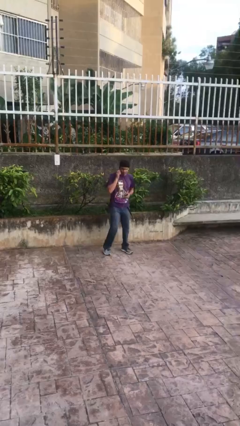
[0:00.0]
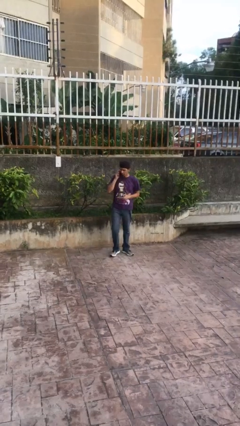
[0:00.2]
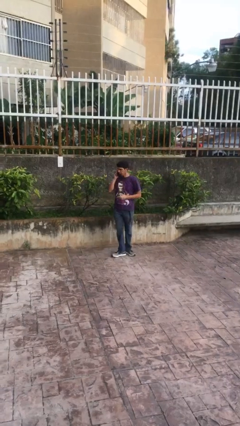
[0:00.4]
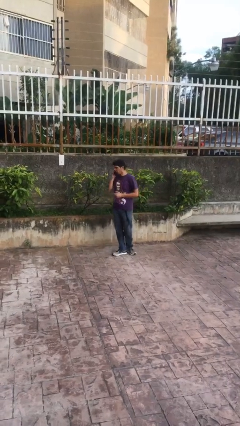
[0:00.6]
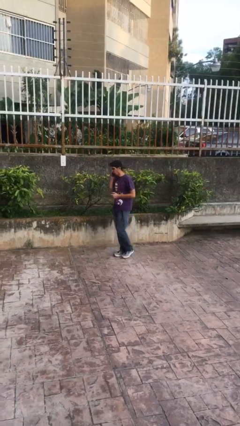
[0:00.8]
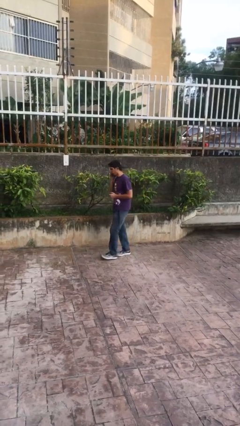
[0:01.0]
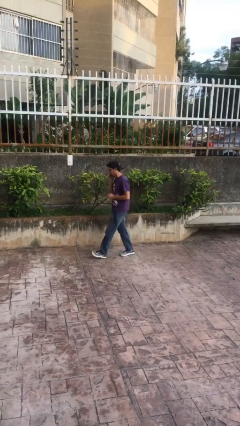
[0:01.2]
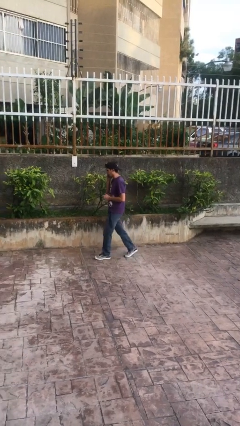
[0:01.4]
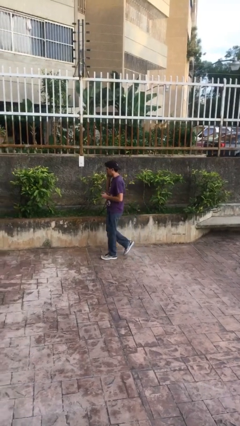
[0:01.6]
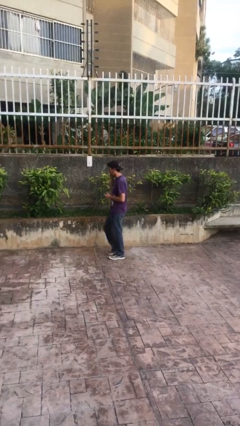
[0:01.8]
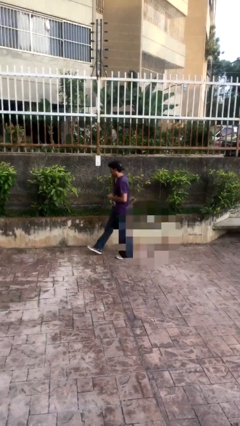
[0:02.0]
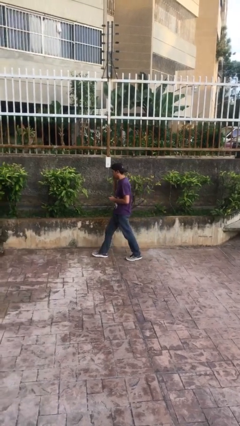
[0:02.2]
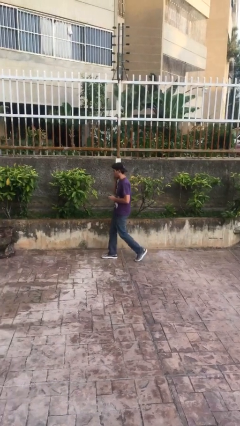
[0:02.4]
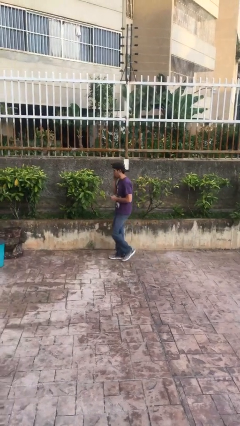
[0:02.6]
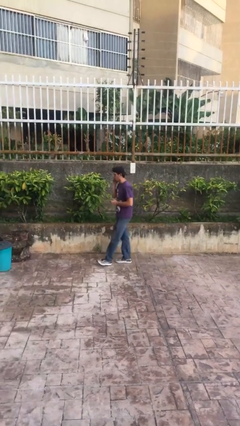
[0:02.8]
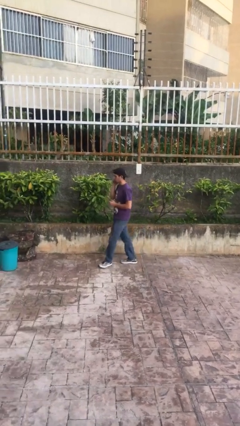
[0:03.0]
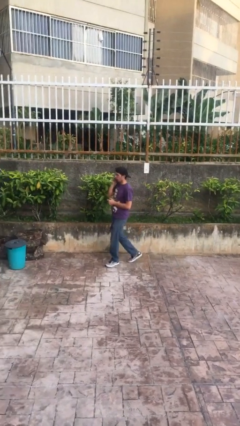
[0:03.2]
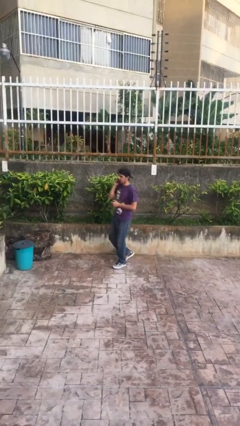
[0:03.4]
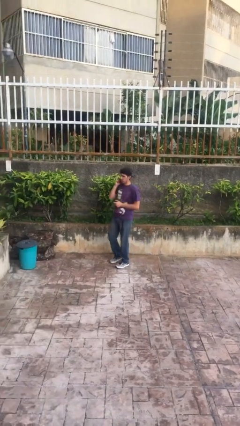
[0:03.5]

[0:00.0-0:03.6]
person talks on phone

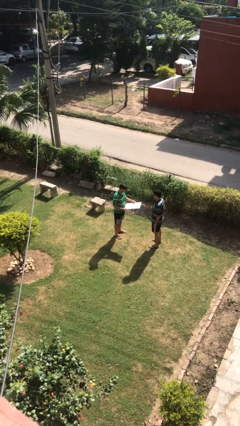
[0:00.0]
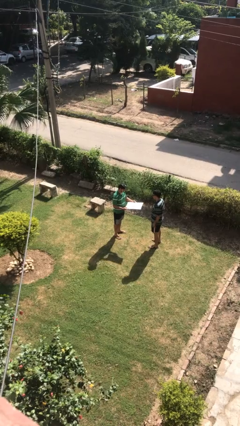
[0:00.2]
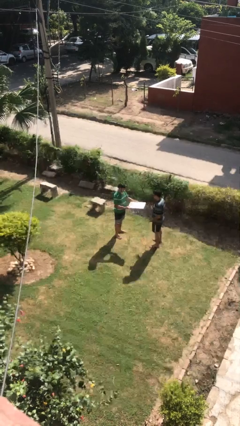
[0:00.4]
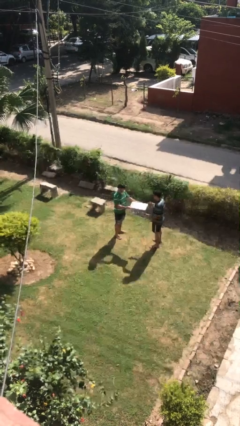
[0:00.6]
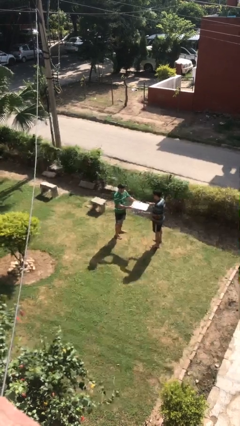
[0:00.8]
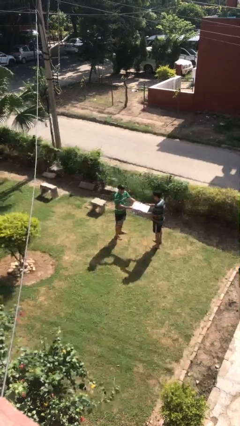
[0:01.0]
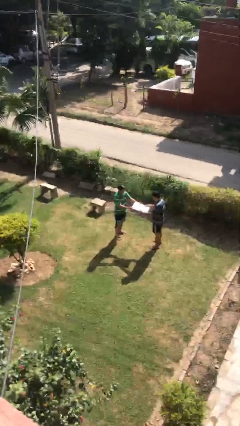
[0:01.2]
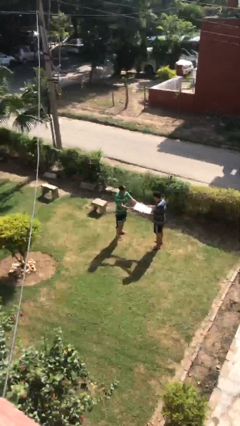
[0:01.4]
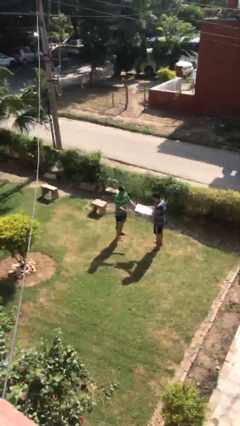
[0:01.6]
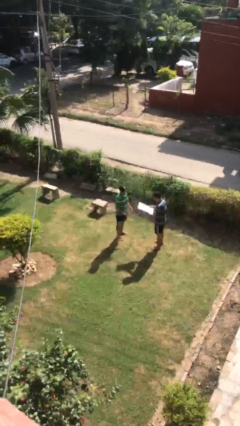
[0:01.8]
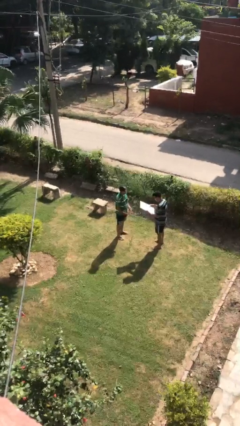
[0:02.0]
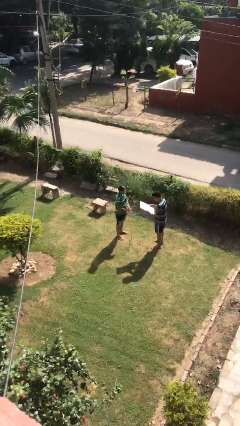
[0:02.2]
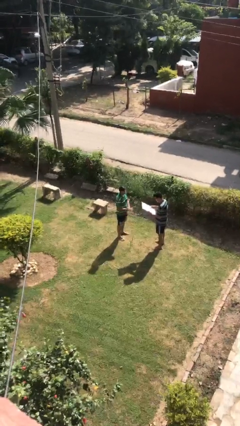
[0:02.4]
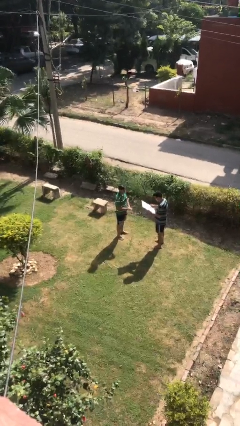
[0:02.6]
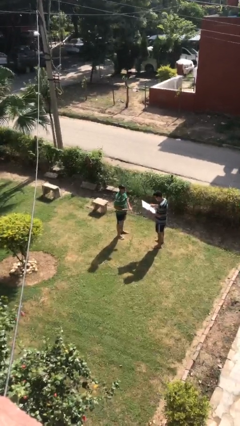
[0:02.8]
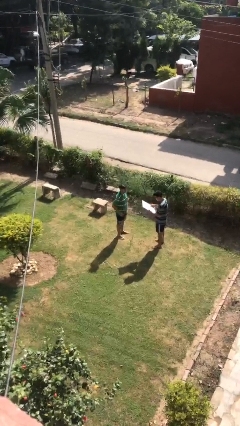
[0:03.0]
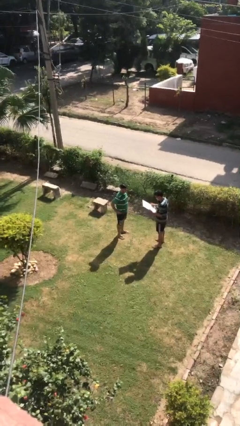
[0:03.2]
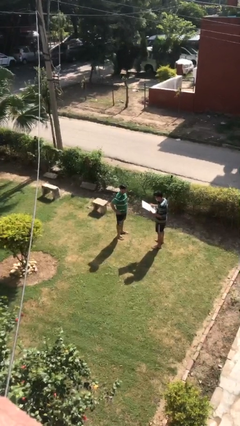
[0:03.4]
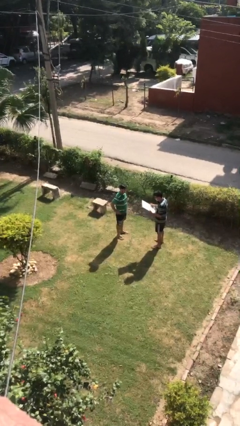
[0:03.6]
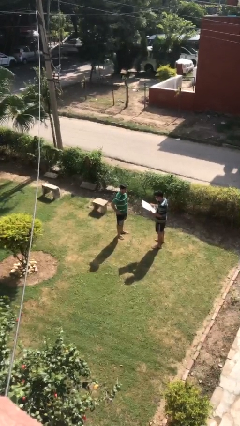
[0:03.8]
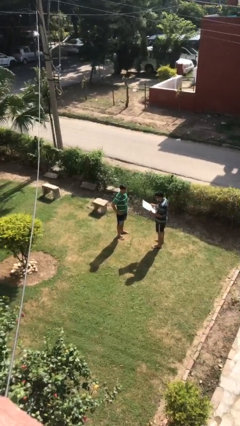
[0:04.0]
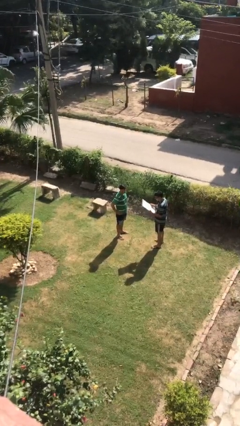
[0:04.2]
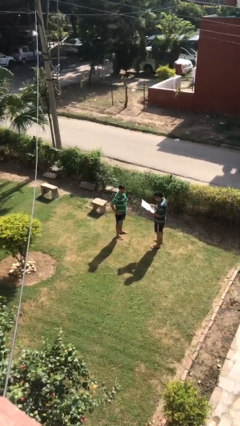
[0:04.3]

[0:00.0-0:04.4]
person transfers object to person

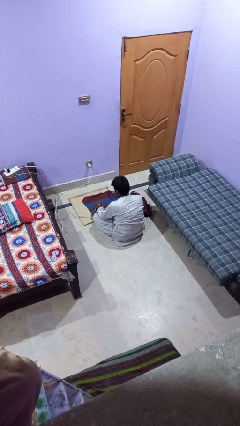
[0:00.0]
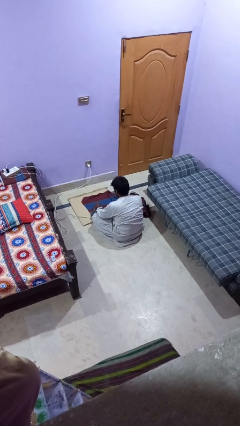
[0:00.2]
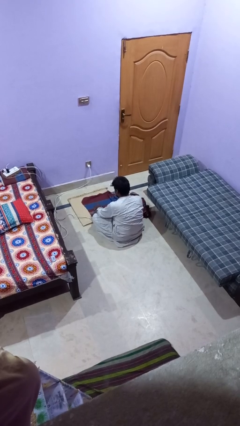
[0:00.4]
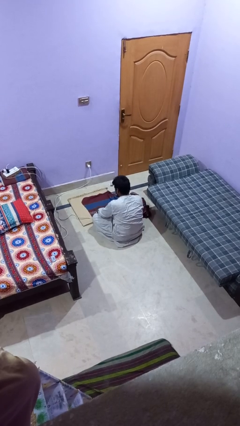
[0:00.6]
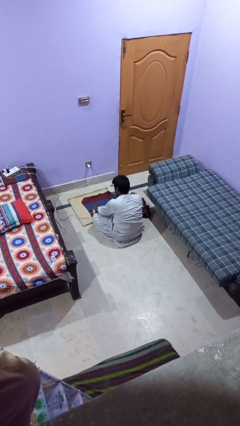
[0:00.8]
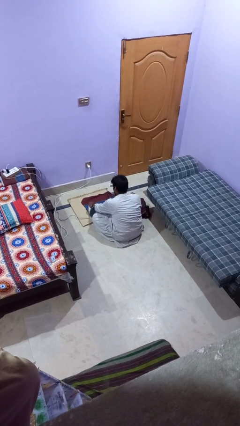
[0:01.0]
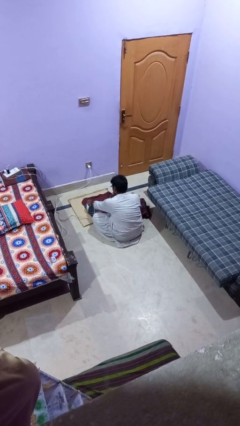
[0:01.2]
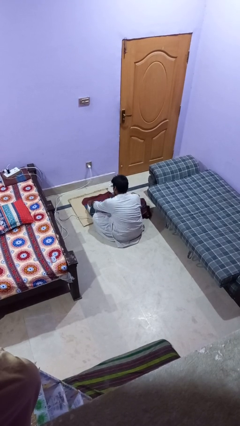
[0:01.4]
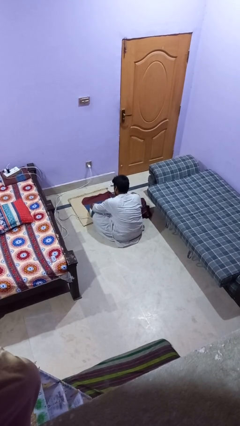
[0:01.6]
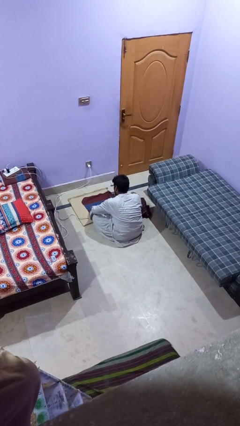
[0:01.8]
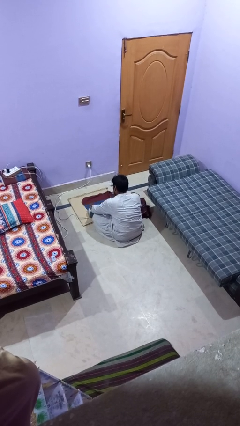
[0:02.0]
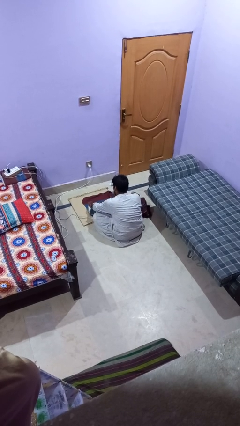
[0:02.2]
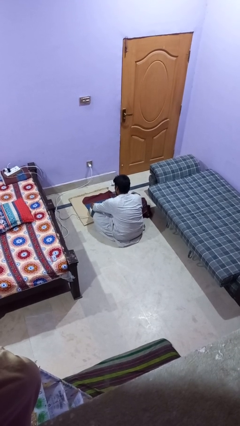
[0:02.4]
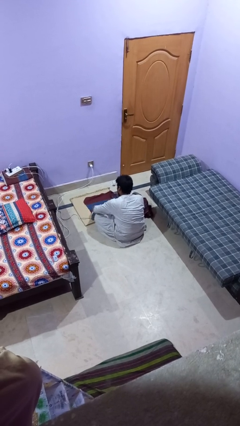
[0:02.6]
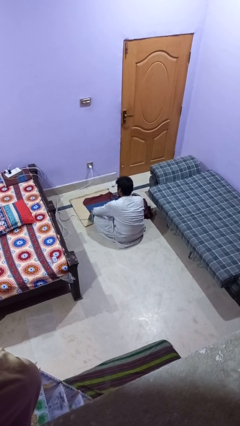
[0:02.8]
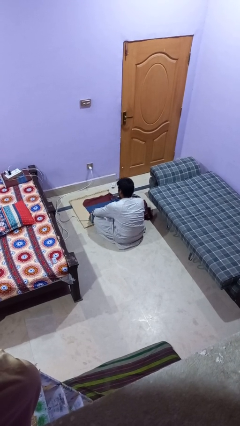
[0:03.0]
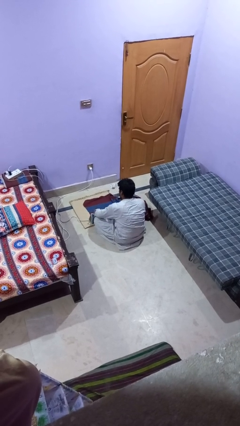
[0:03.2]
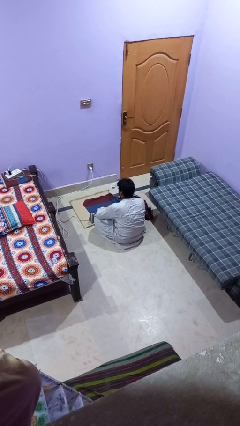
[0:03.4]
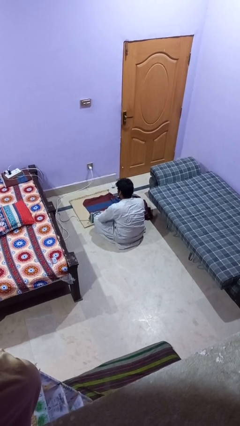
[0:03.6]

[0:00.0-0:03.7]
person irons clothes

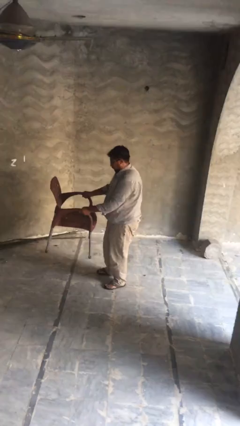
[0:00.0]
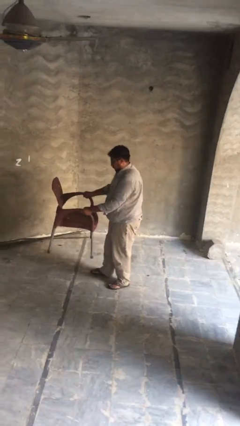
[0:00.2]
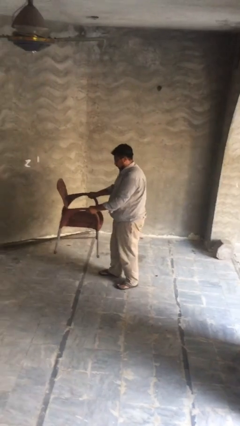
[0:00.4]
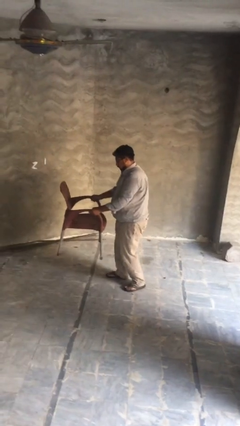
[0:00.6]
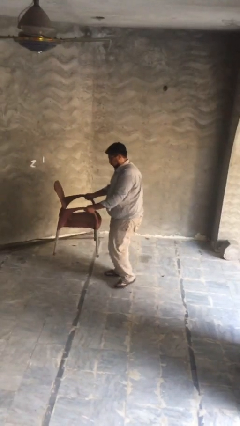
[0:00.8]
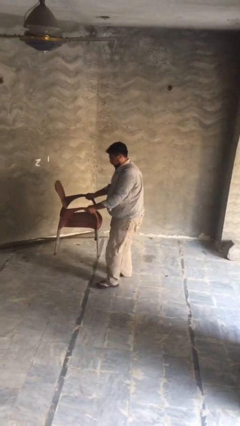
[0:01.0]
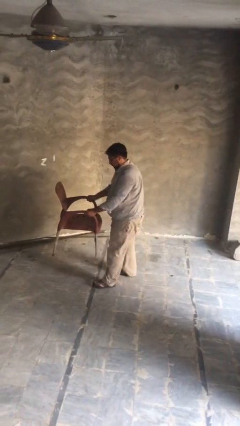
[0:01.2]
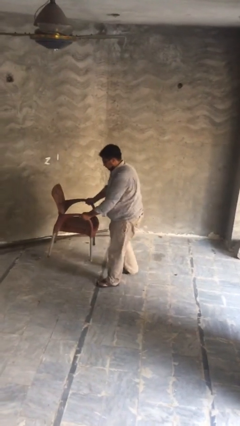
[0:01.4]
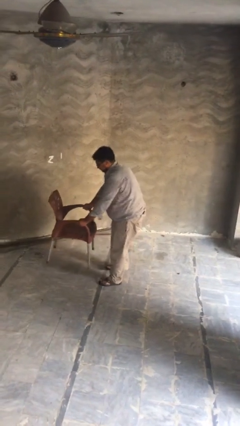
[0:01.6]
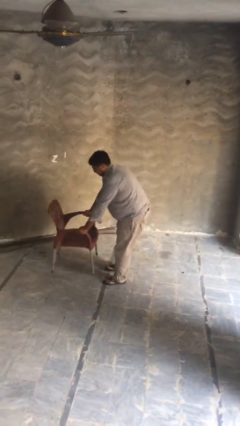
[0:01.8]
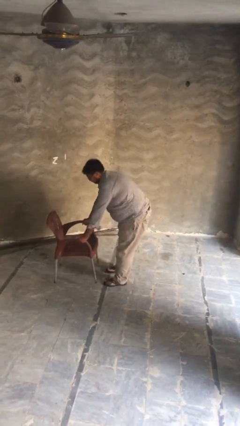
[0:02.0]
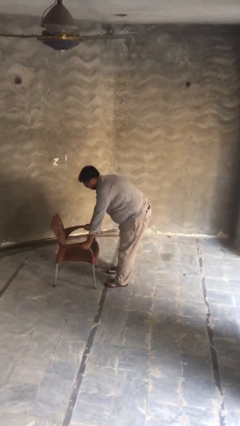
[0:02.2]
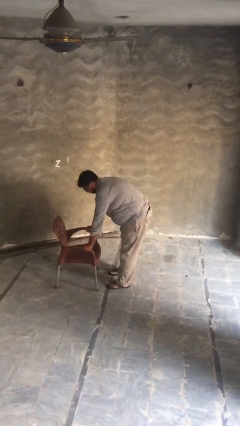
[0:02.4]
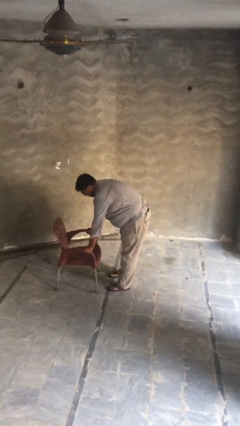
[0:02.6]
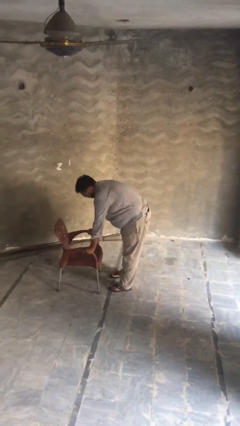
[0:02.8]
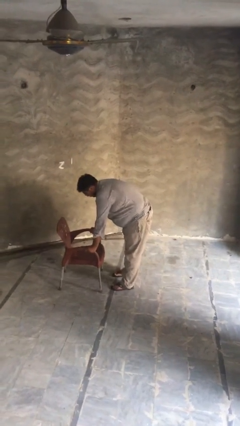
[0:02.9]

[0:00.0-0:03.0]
person puts down object on floor

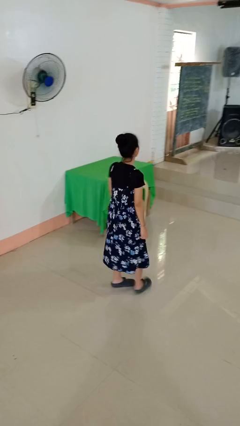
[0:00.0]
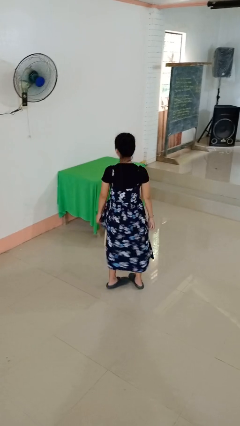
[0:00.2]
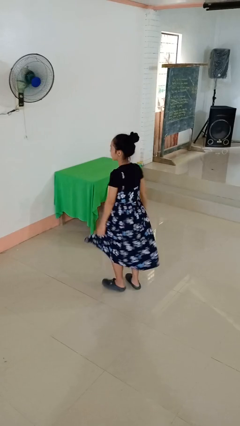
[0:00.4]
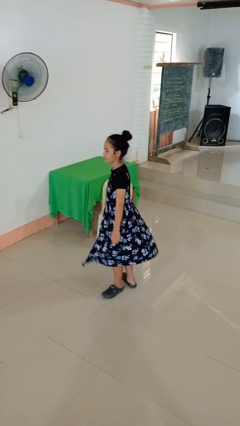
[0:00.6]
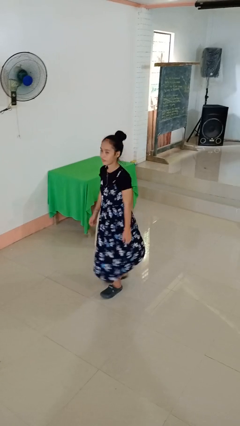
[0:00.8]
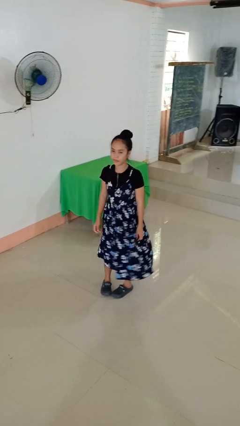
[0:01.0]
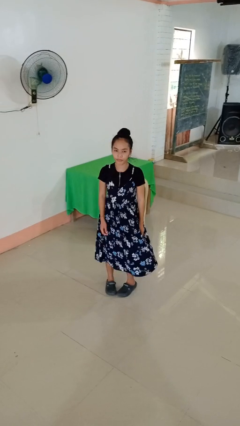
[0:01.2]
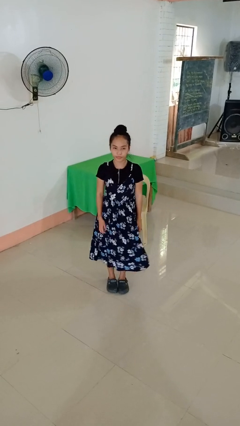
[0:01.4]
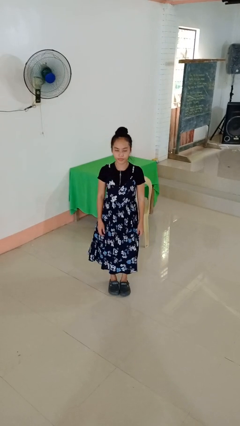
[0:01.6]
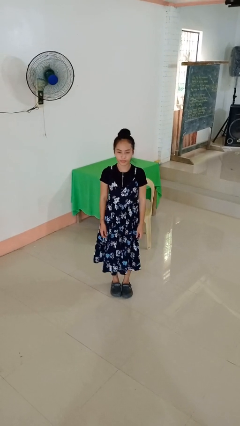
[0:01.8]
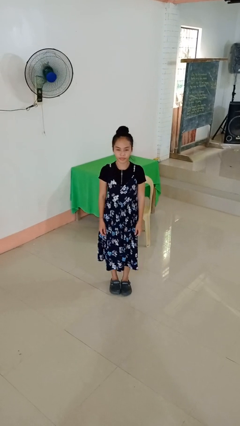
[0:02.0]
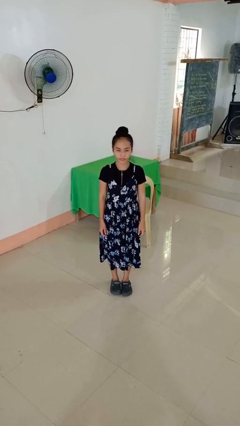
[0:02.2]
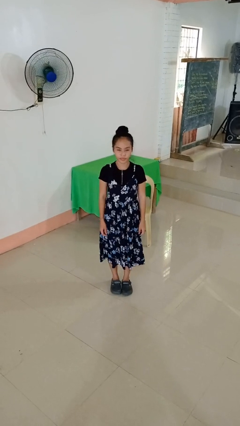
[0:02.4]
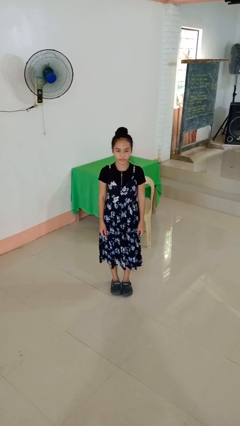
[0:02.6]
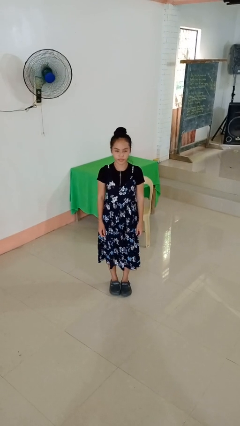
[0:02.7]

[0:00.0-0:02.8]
person twirls

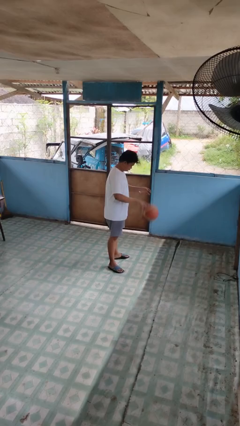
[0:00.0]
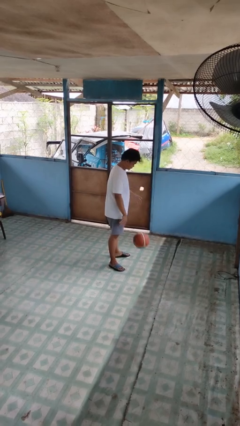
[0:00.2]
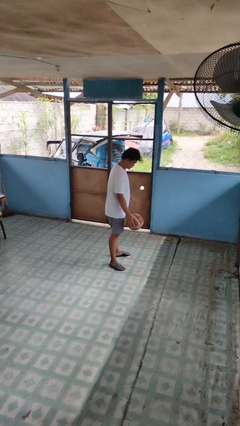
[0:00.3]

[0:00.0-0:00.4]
person bounces ball on floor
